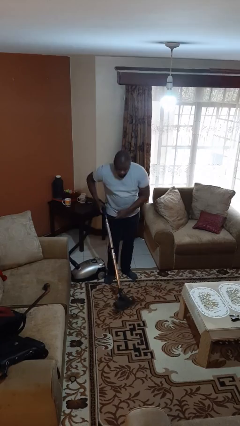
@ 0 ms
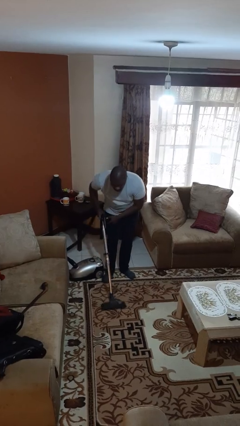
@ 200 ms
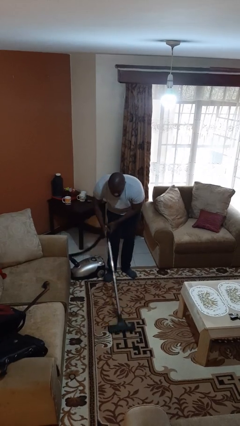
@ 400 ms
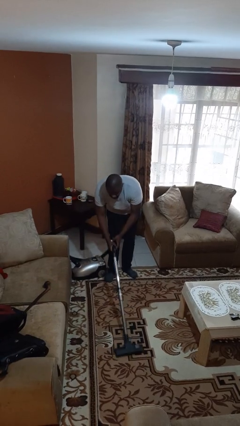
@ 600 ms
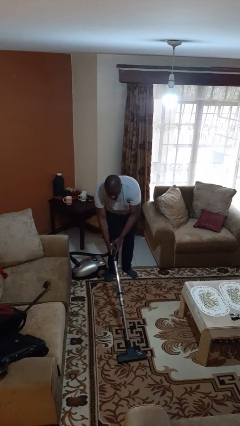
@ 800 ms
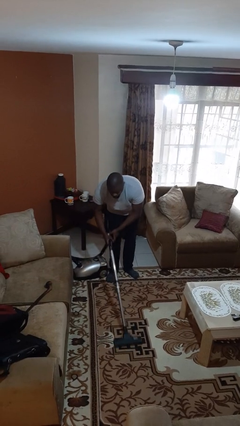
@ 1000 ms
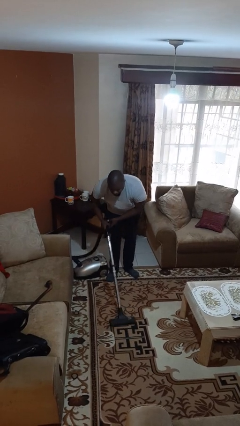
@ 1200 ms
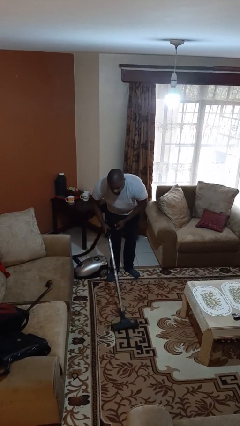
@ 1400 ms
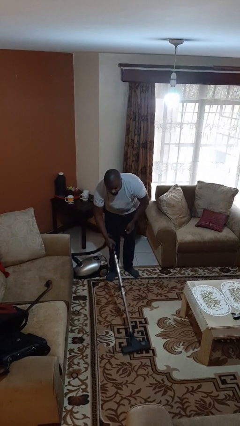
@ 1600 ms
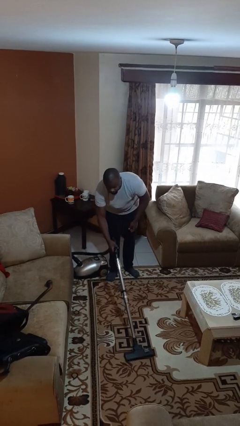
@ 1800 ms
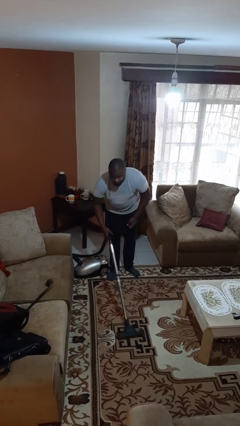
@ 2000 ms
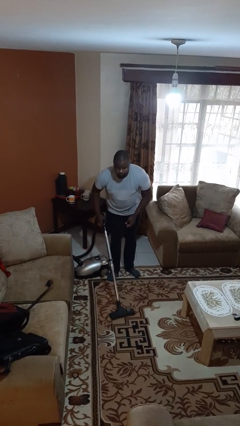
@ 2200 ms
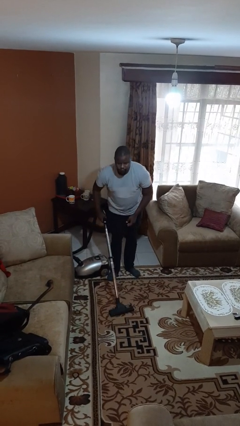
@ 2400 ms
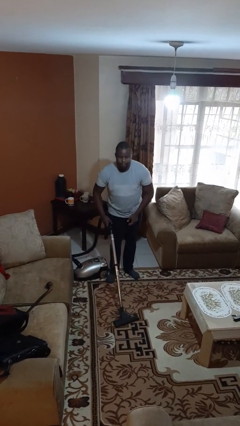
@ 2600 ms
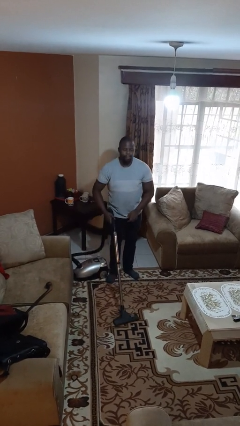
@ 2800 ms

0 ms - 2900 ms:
person vacuums carpet

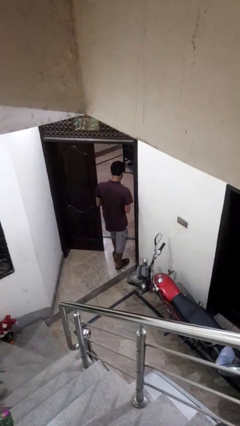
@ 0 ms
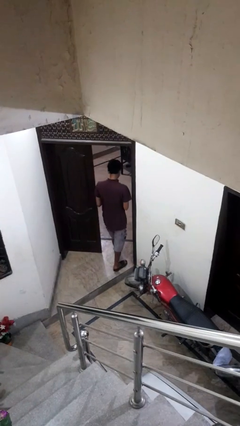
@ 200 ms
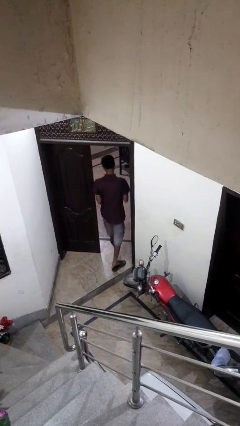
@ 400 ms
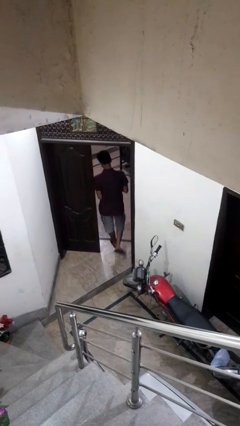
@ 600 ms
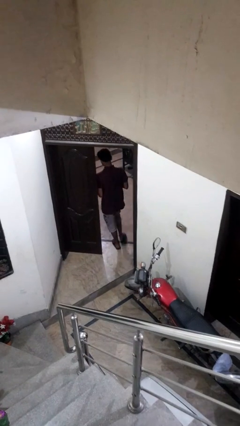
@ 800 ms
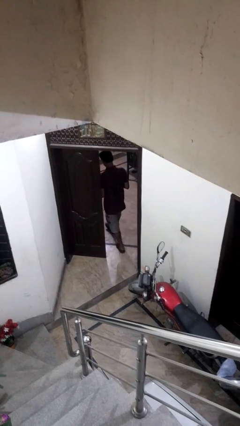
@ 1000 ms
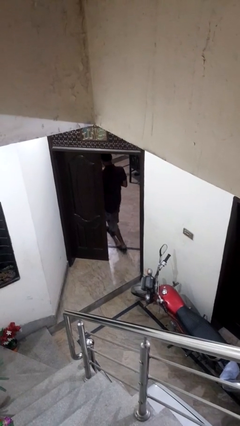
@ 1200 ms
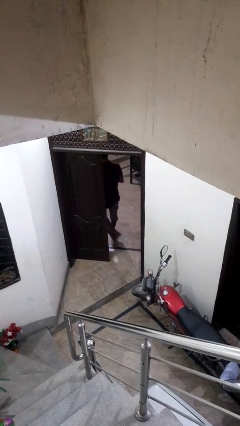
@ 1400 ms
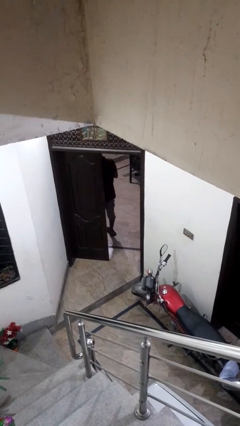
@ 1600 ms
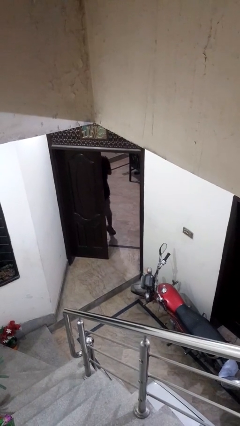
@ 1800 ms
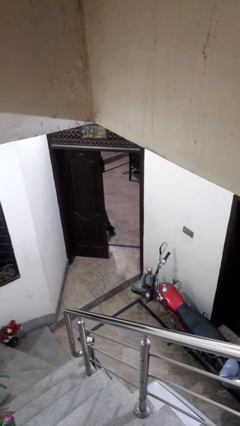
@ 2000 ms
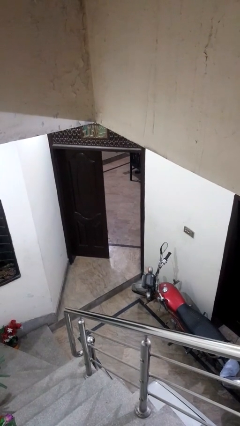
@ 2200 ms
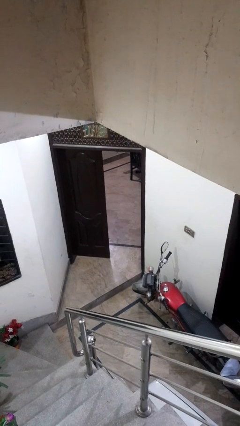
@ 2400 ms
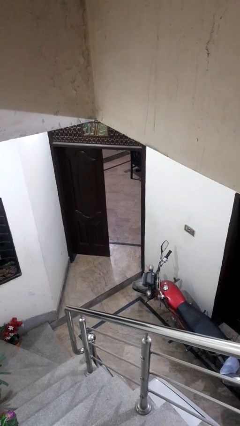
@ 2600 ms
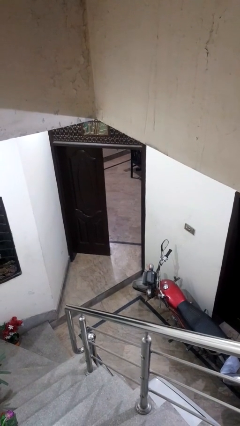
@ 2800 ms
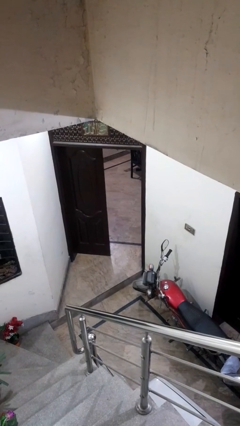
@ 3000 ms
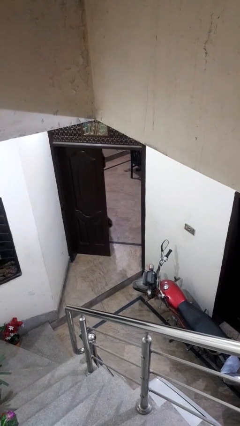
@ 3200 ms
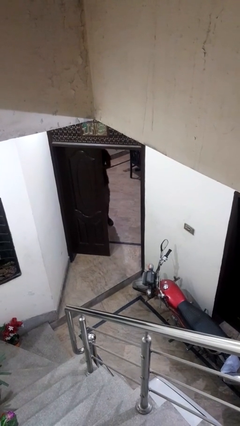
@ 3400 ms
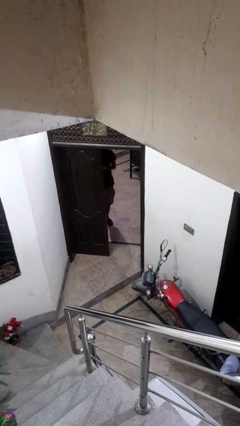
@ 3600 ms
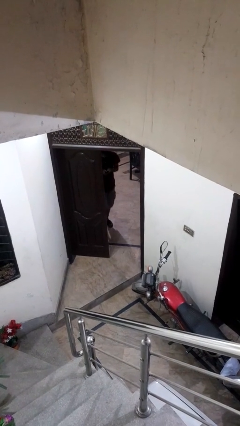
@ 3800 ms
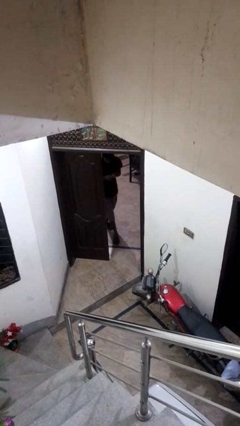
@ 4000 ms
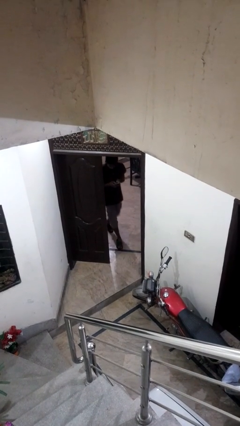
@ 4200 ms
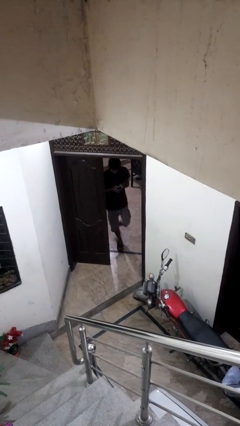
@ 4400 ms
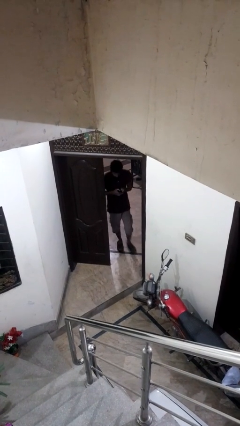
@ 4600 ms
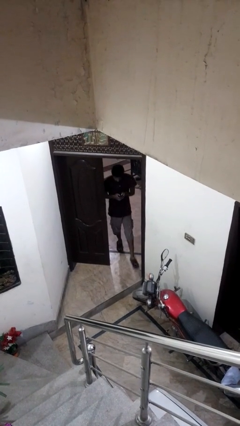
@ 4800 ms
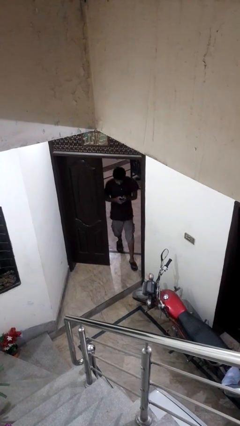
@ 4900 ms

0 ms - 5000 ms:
person exits scene through structure

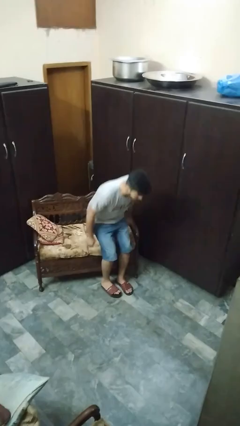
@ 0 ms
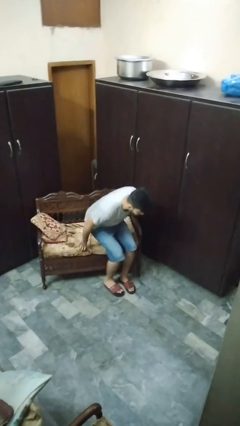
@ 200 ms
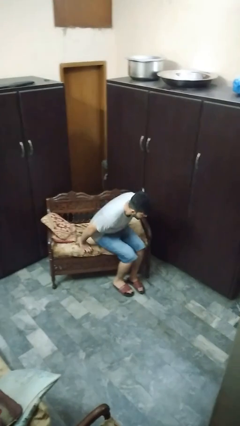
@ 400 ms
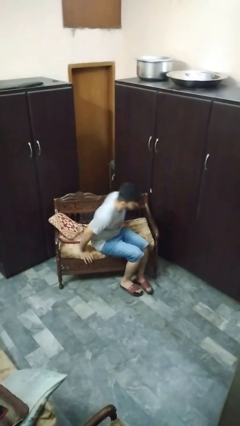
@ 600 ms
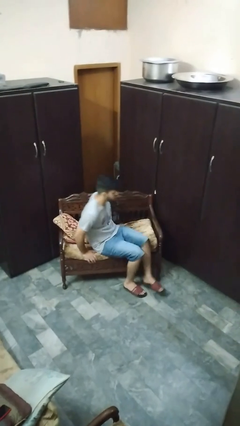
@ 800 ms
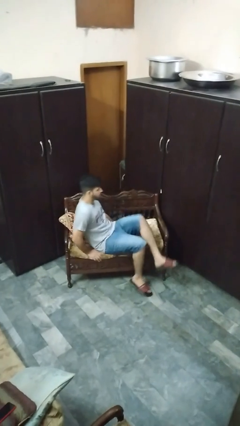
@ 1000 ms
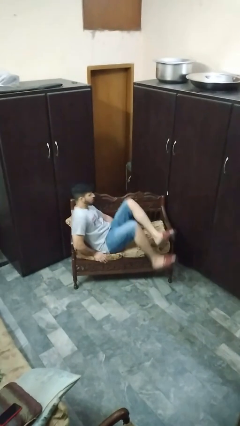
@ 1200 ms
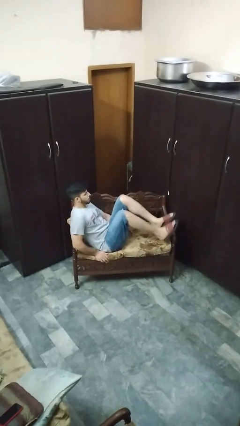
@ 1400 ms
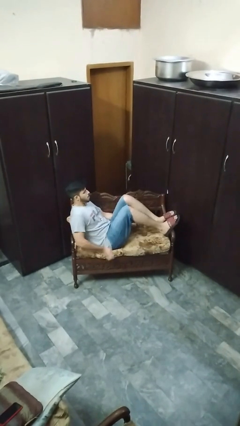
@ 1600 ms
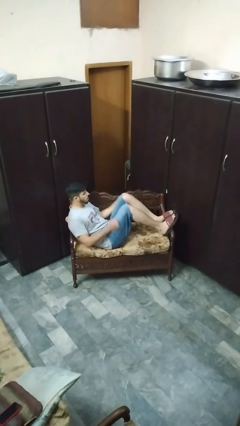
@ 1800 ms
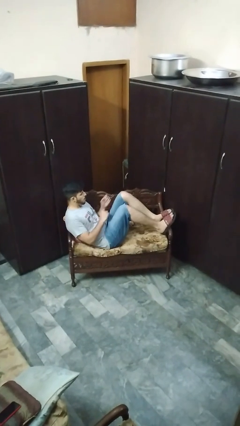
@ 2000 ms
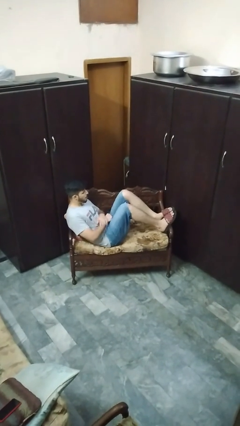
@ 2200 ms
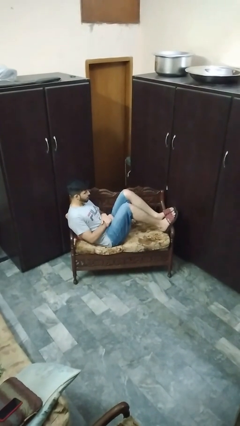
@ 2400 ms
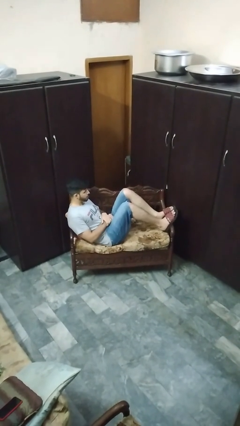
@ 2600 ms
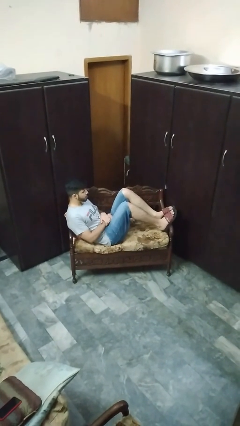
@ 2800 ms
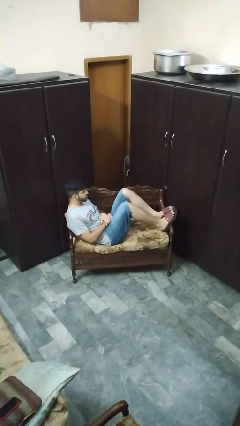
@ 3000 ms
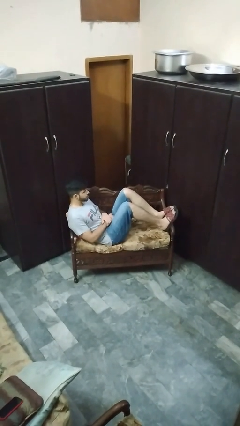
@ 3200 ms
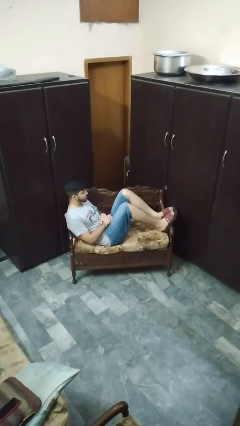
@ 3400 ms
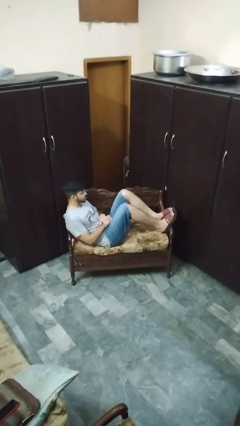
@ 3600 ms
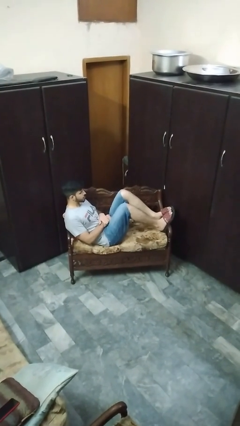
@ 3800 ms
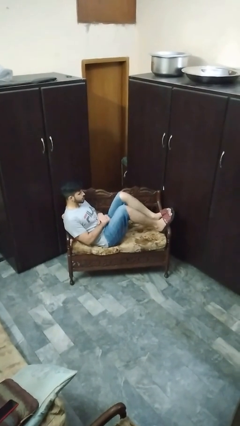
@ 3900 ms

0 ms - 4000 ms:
person lies down on couch

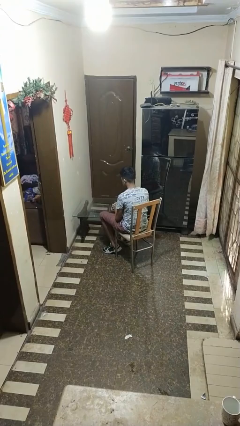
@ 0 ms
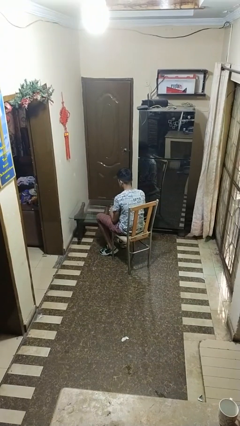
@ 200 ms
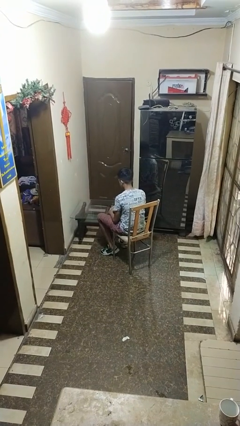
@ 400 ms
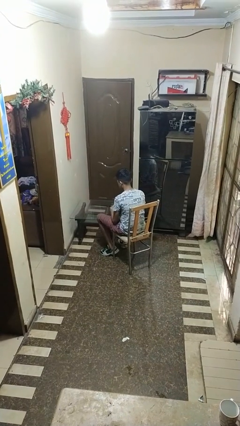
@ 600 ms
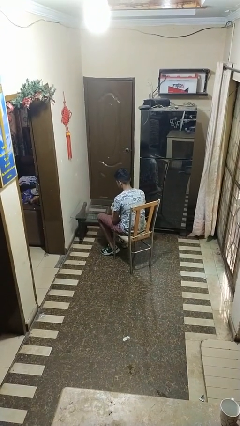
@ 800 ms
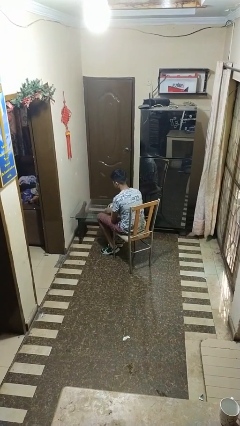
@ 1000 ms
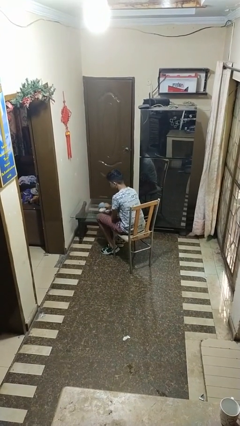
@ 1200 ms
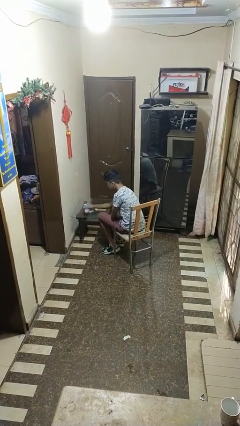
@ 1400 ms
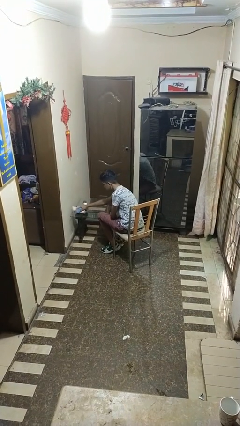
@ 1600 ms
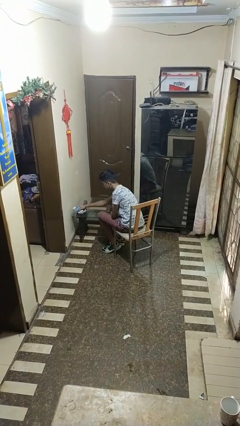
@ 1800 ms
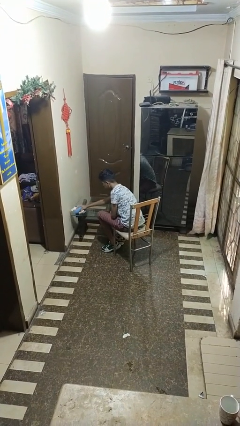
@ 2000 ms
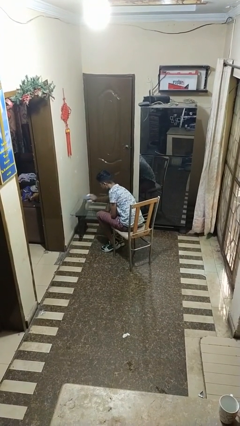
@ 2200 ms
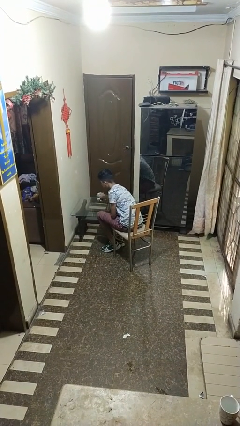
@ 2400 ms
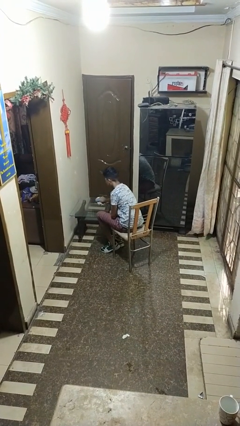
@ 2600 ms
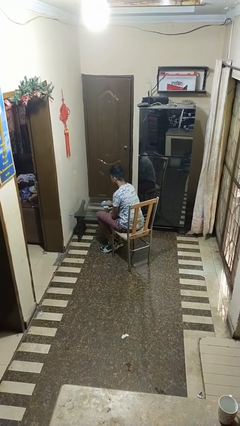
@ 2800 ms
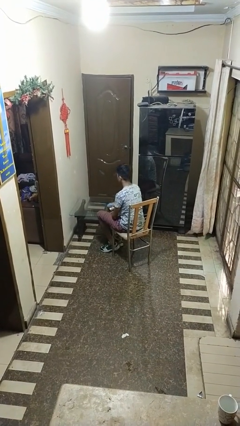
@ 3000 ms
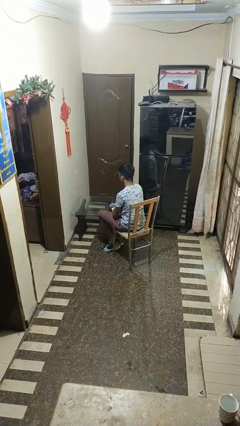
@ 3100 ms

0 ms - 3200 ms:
person cleans table with rag

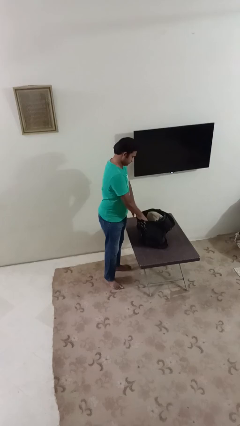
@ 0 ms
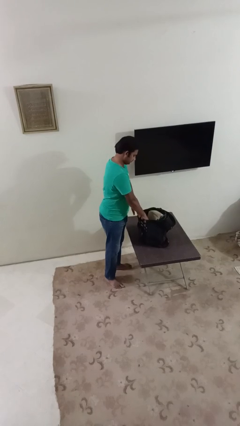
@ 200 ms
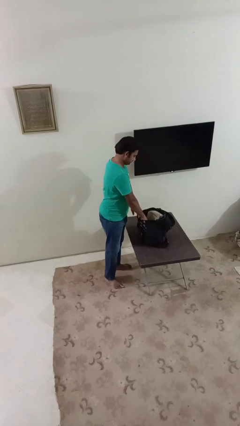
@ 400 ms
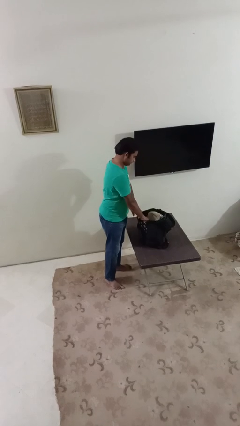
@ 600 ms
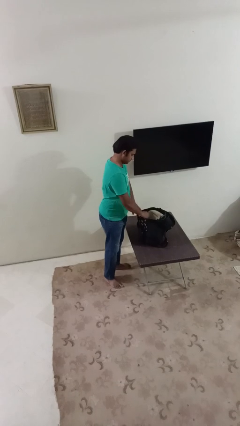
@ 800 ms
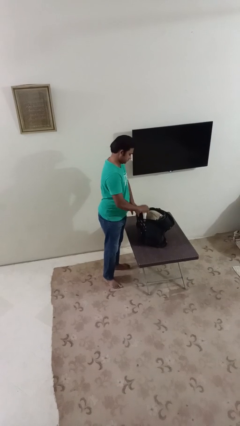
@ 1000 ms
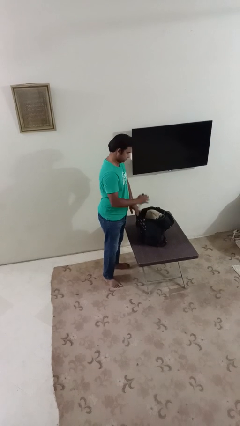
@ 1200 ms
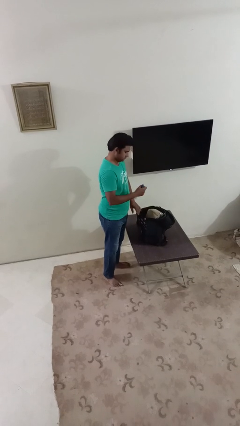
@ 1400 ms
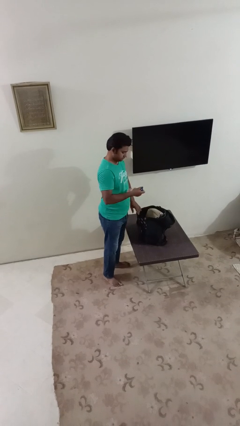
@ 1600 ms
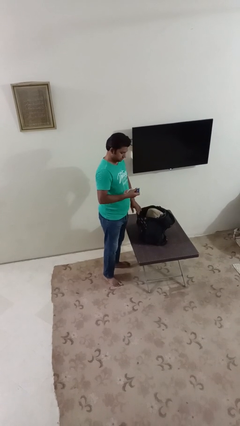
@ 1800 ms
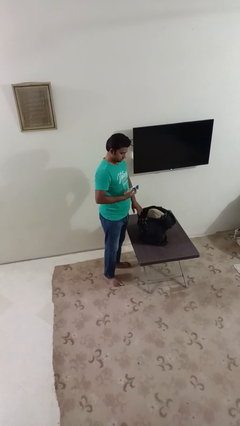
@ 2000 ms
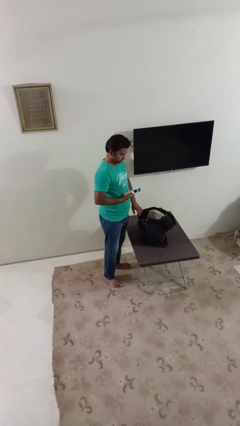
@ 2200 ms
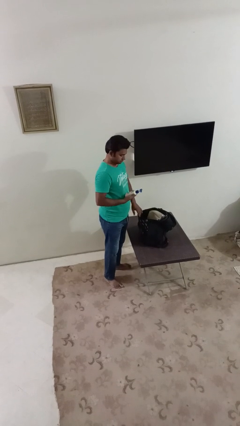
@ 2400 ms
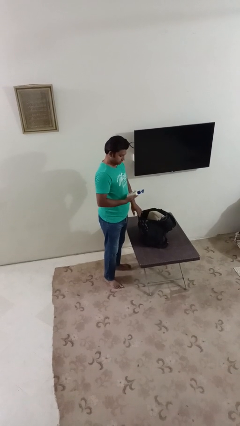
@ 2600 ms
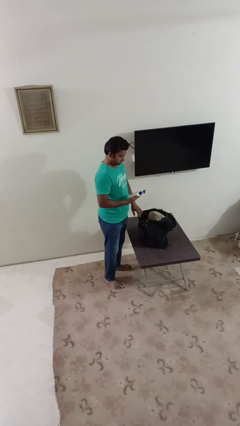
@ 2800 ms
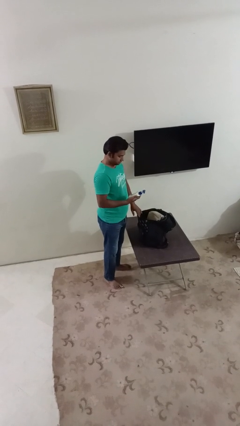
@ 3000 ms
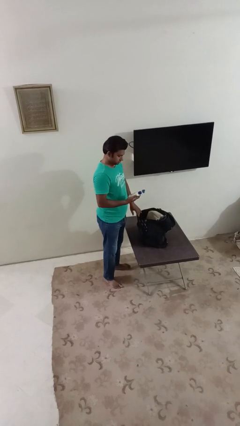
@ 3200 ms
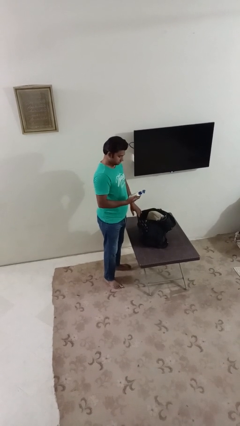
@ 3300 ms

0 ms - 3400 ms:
person takes object from backpack
